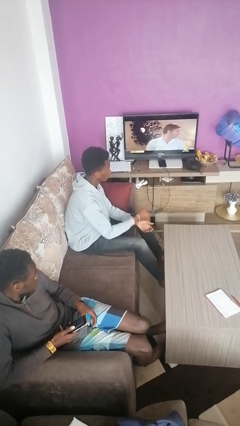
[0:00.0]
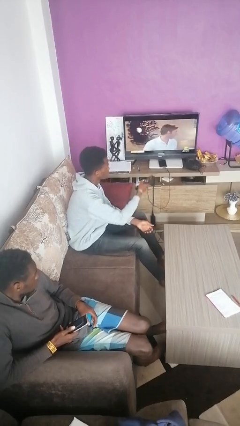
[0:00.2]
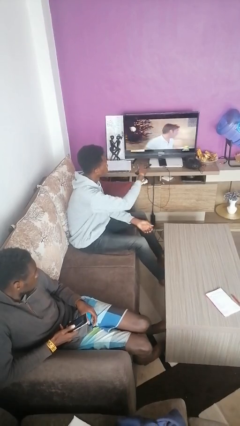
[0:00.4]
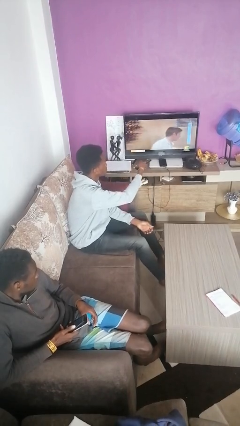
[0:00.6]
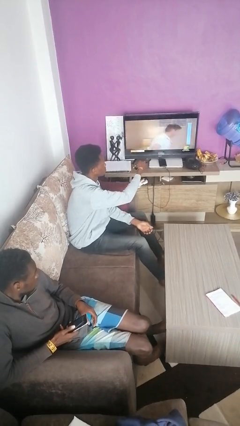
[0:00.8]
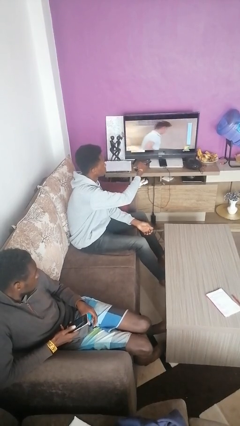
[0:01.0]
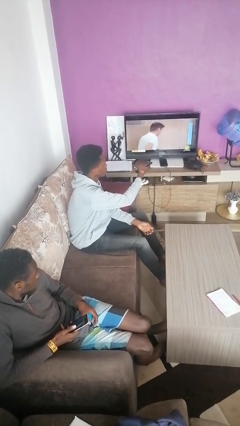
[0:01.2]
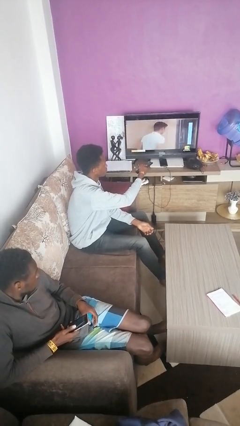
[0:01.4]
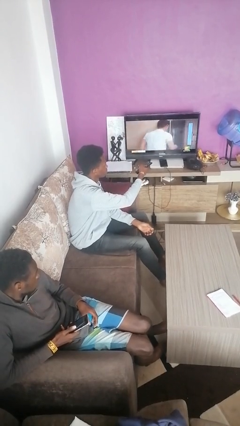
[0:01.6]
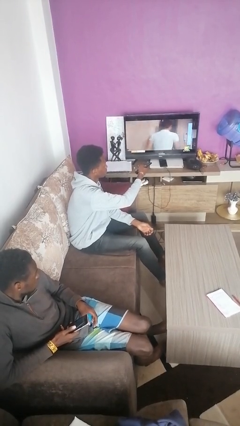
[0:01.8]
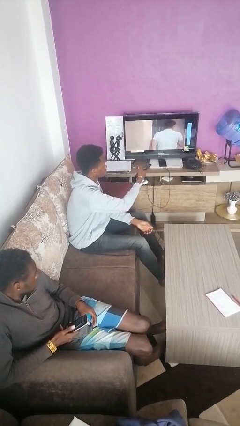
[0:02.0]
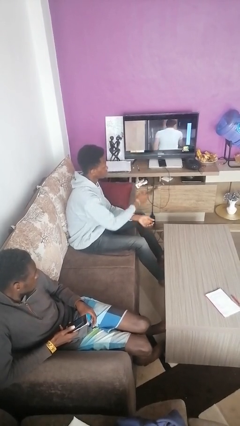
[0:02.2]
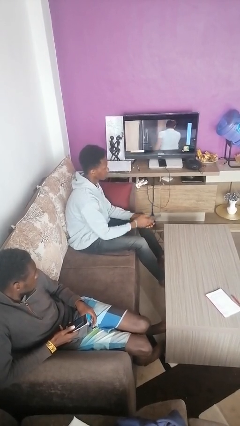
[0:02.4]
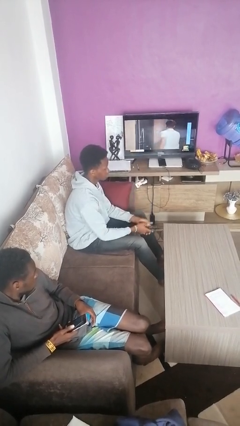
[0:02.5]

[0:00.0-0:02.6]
person uses television remote

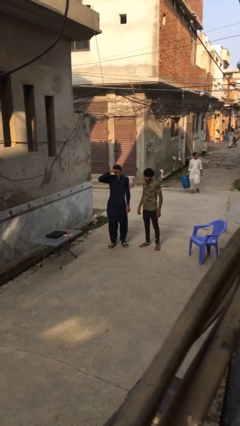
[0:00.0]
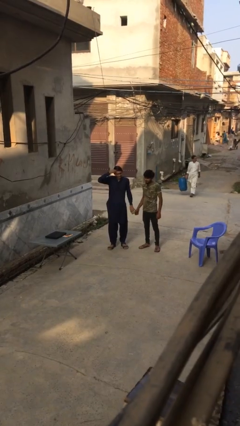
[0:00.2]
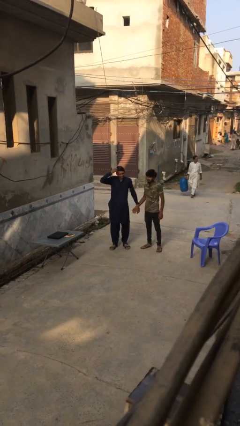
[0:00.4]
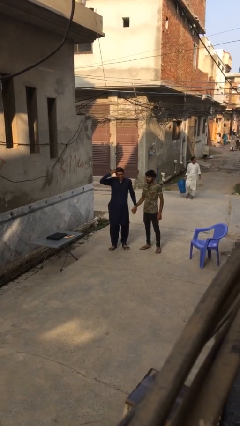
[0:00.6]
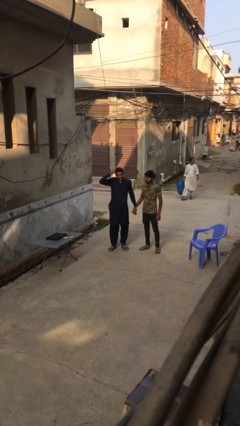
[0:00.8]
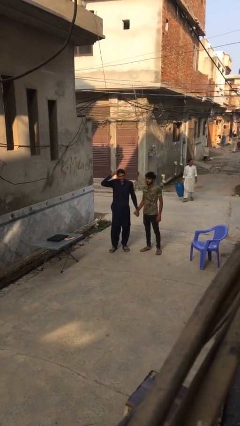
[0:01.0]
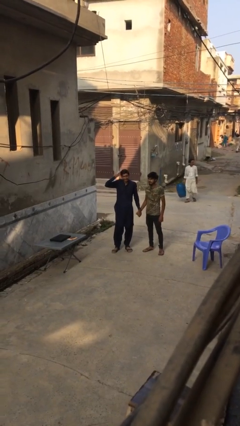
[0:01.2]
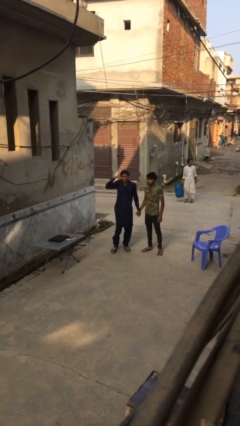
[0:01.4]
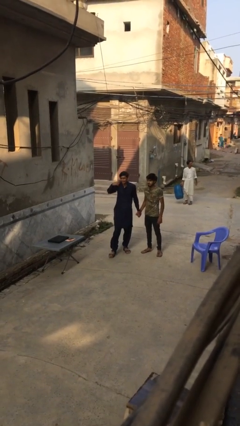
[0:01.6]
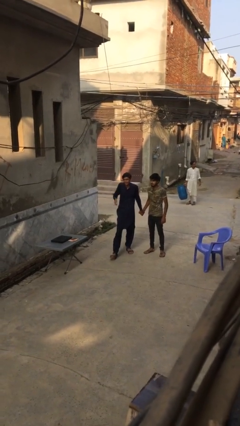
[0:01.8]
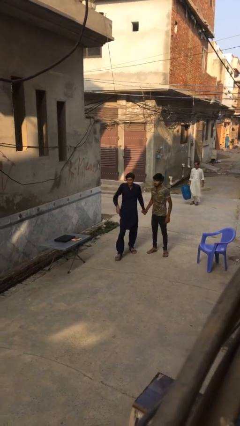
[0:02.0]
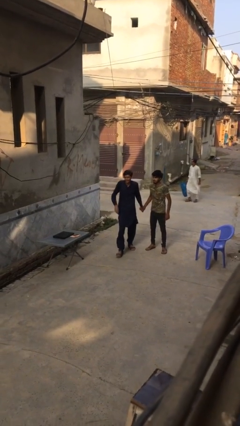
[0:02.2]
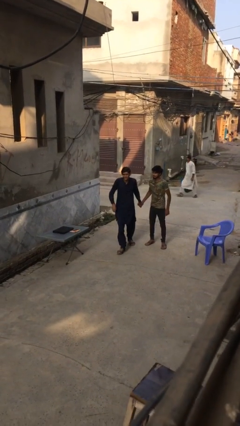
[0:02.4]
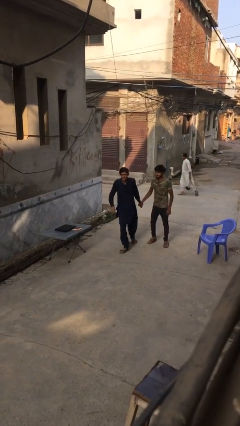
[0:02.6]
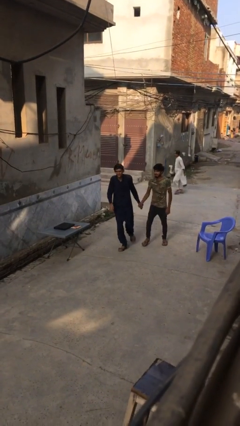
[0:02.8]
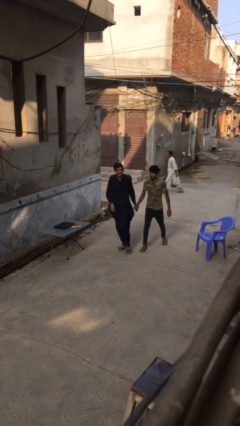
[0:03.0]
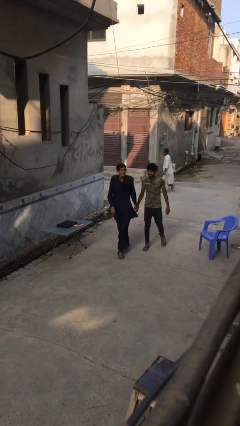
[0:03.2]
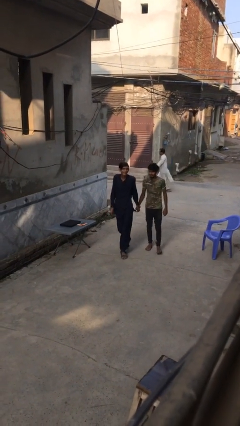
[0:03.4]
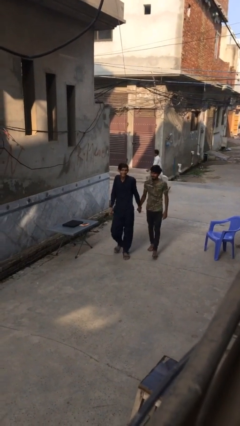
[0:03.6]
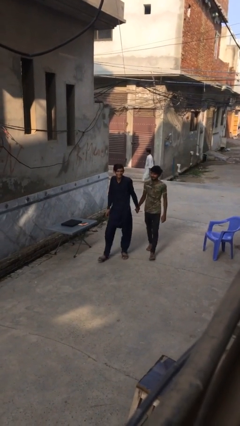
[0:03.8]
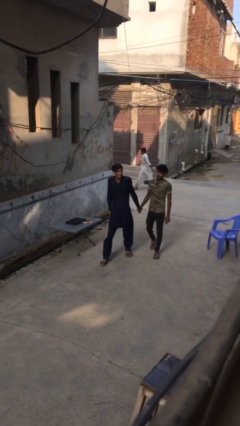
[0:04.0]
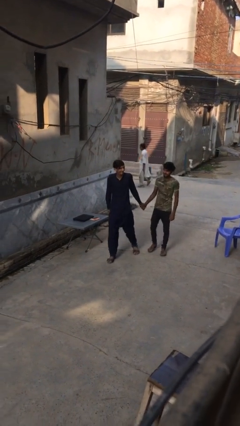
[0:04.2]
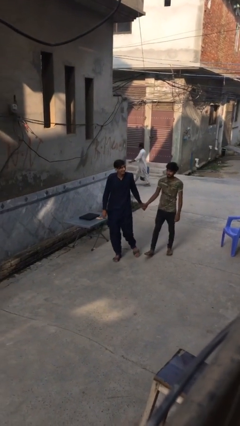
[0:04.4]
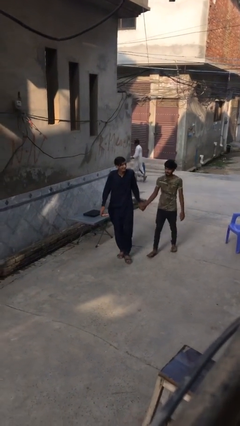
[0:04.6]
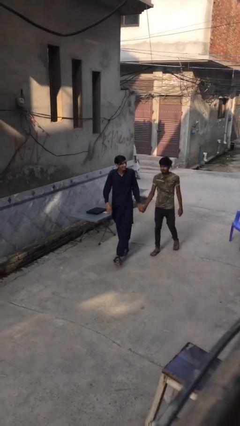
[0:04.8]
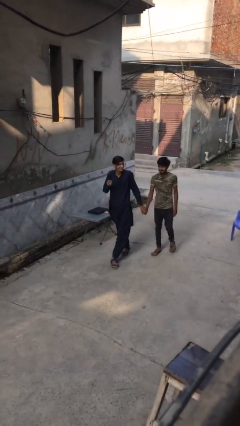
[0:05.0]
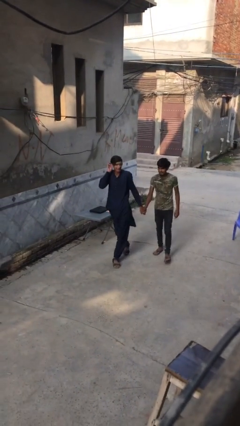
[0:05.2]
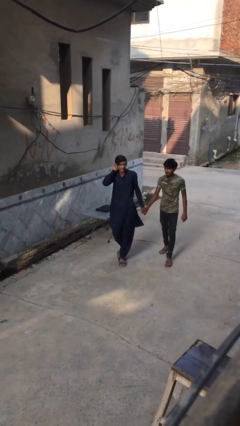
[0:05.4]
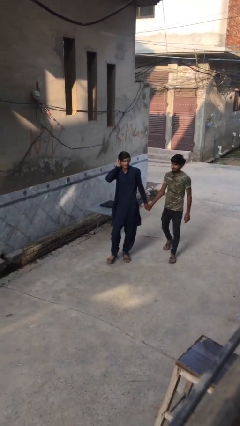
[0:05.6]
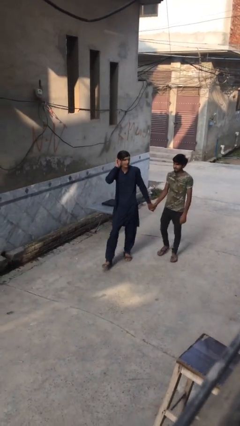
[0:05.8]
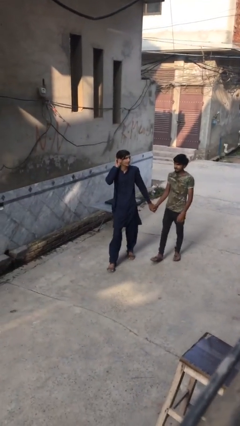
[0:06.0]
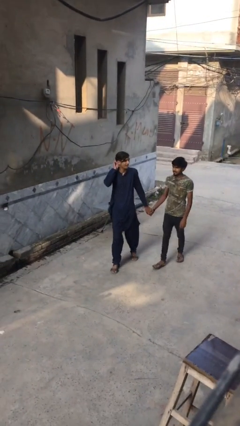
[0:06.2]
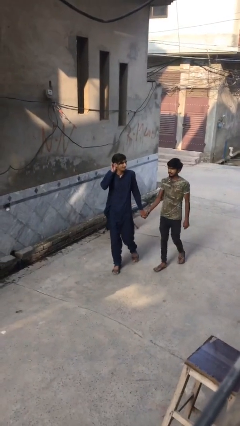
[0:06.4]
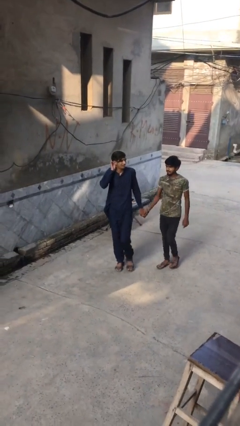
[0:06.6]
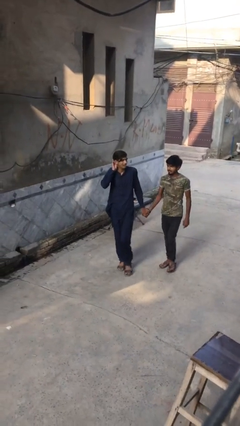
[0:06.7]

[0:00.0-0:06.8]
person holds hand

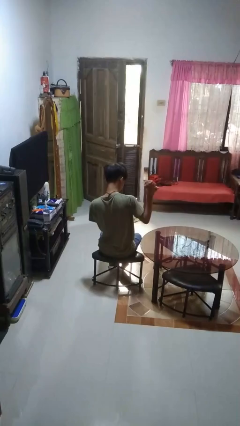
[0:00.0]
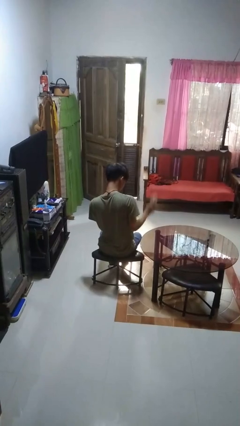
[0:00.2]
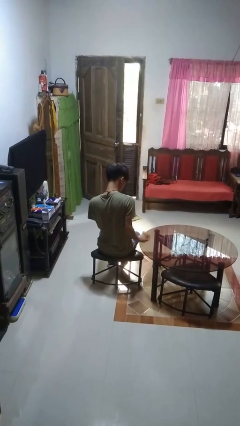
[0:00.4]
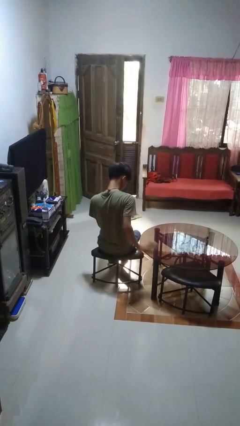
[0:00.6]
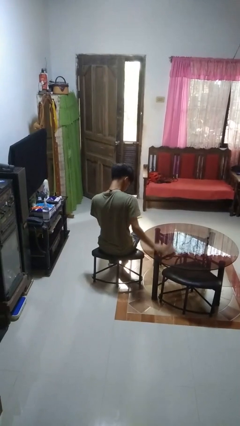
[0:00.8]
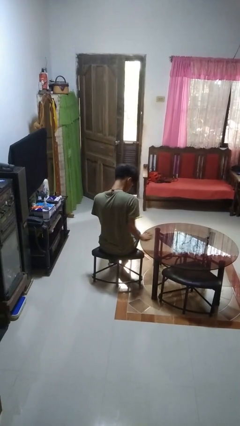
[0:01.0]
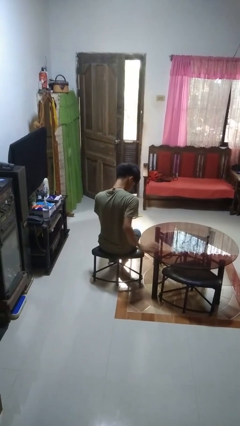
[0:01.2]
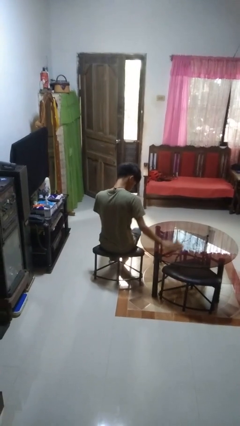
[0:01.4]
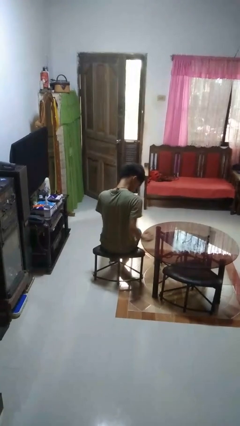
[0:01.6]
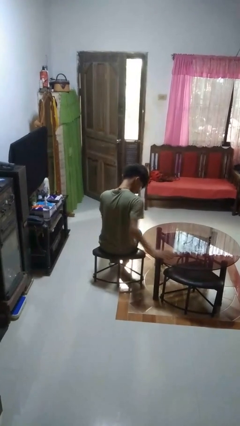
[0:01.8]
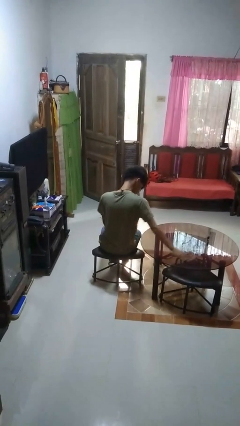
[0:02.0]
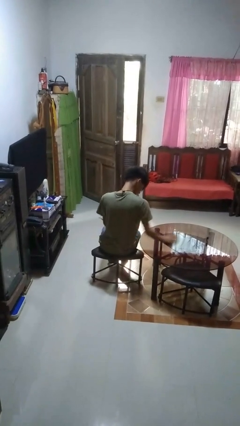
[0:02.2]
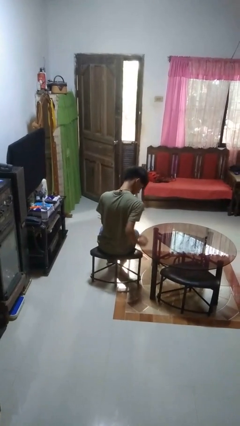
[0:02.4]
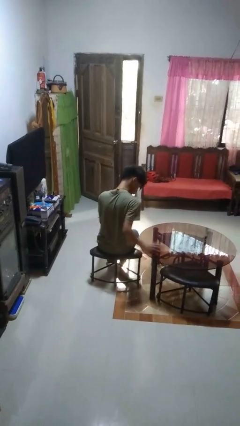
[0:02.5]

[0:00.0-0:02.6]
person cleans table with rag

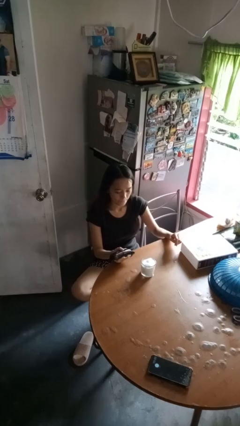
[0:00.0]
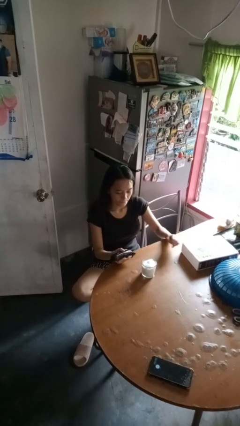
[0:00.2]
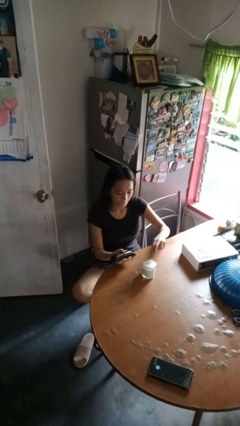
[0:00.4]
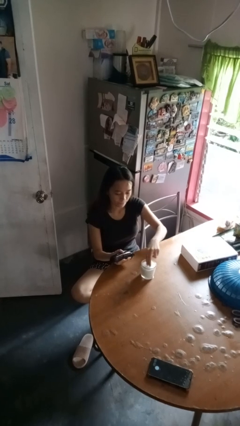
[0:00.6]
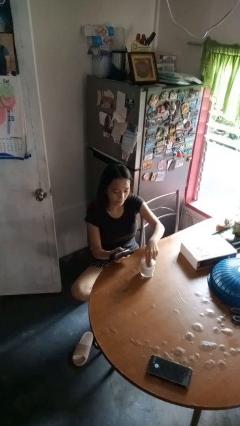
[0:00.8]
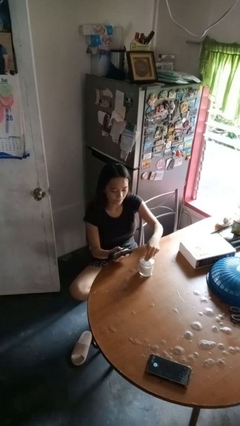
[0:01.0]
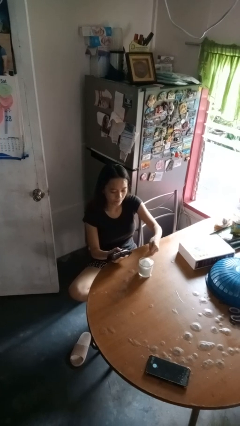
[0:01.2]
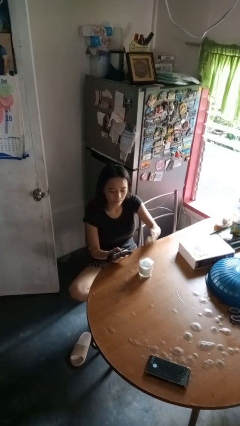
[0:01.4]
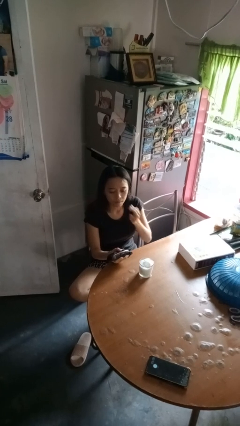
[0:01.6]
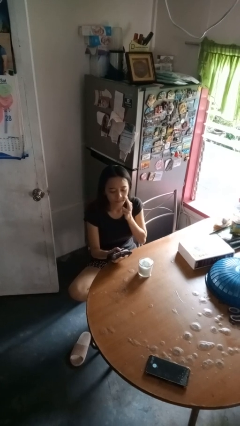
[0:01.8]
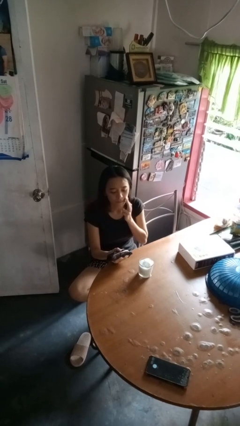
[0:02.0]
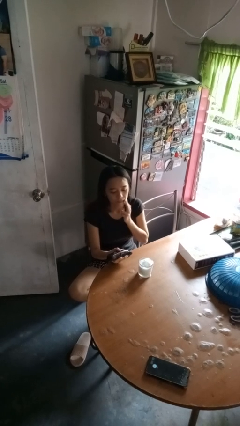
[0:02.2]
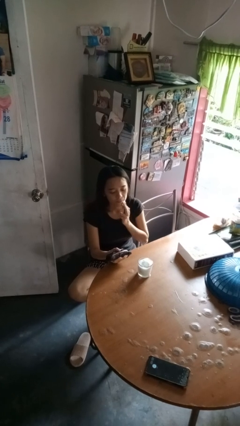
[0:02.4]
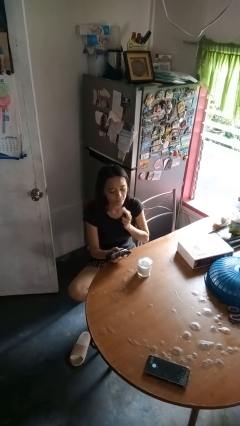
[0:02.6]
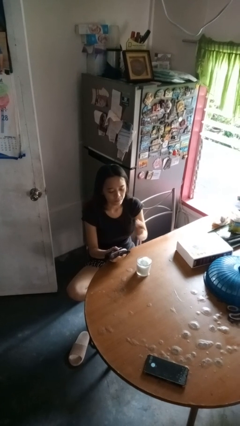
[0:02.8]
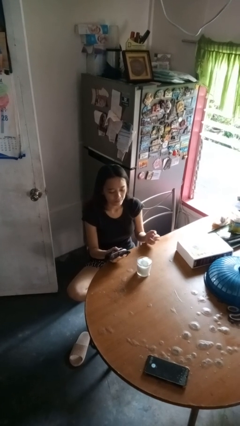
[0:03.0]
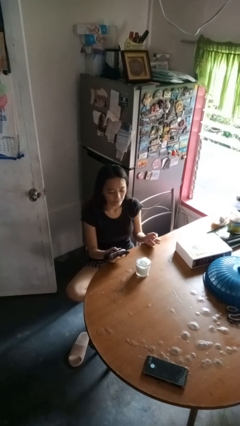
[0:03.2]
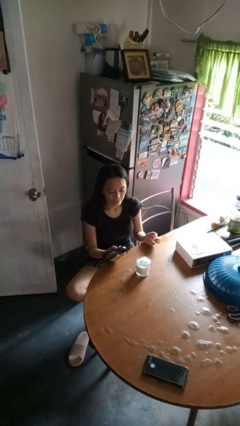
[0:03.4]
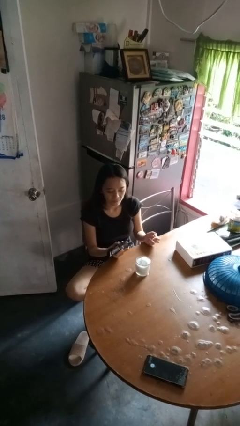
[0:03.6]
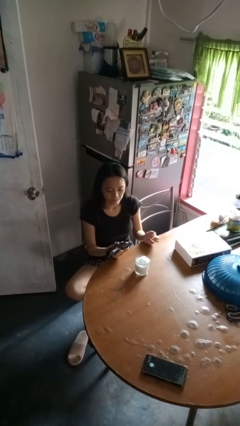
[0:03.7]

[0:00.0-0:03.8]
person applies shaving cream

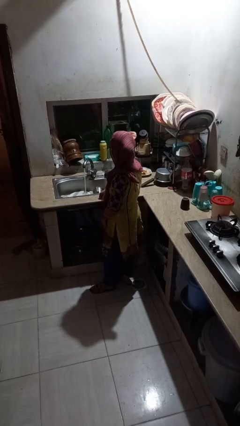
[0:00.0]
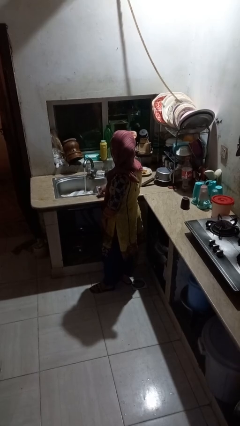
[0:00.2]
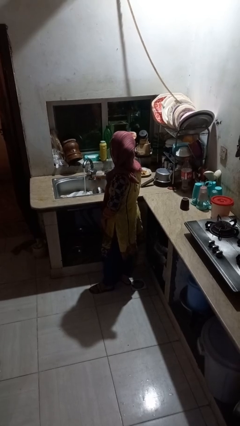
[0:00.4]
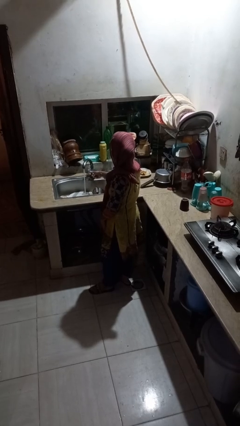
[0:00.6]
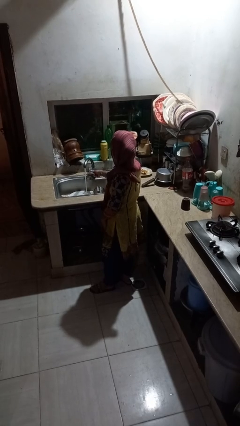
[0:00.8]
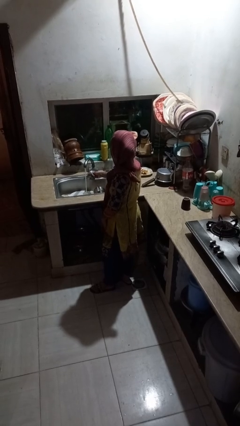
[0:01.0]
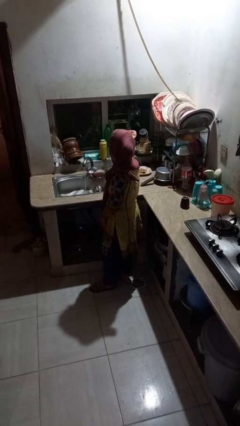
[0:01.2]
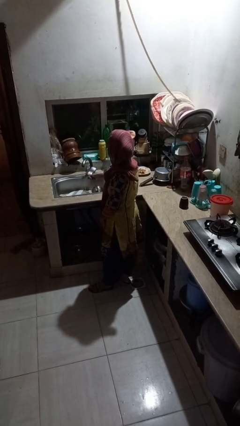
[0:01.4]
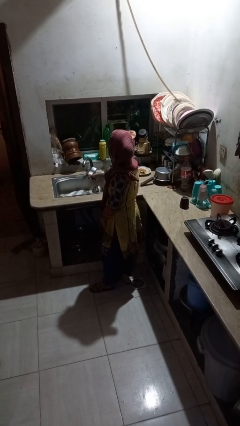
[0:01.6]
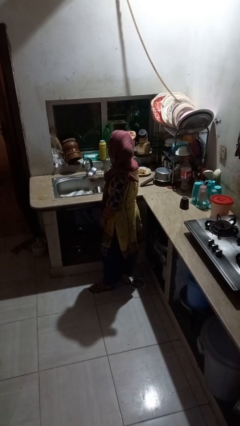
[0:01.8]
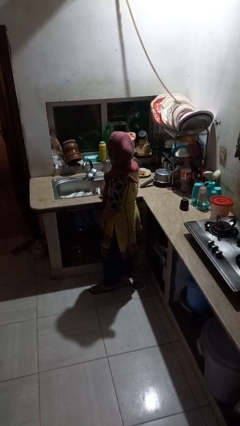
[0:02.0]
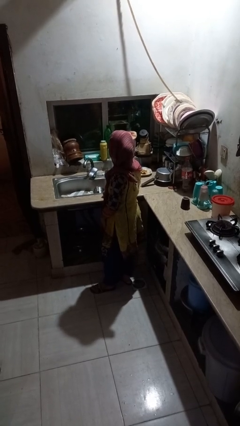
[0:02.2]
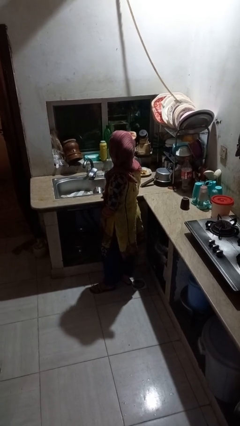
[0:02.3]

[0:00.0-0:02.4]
person turns off faucet
